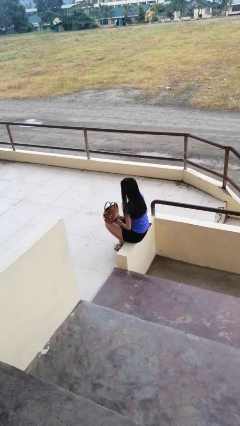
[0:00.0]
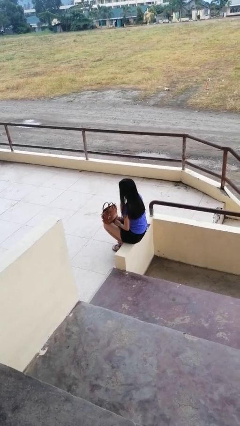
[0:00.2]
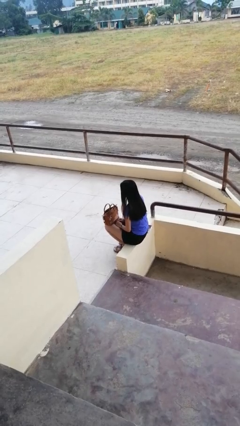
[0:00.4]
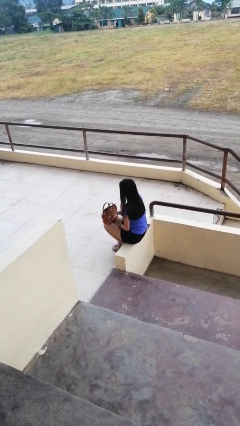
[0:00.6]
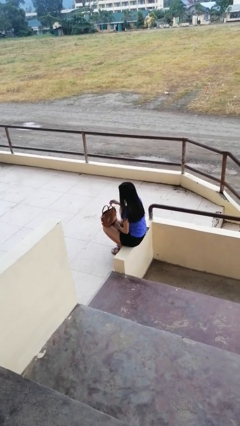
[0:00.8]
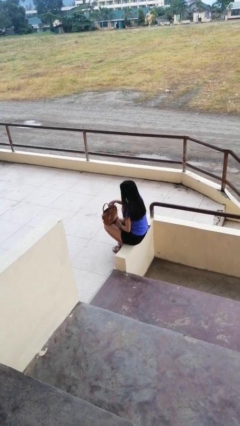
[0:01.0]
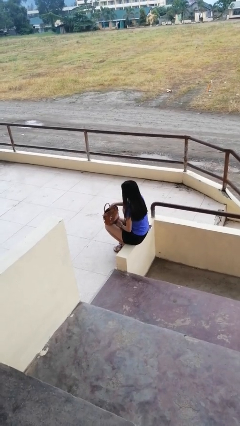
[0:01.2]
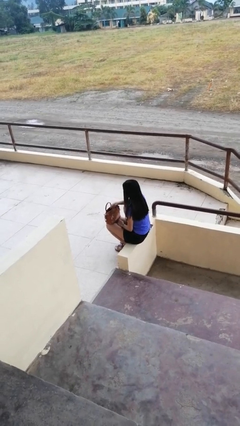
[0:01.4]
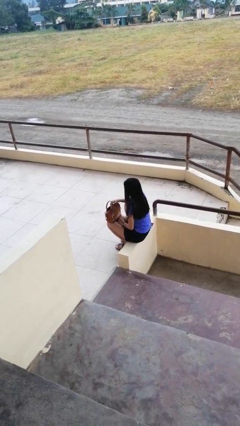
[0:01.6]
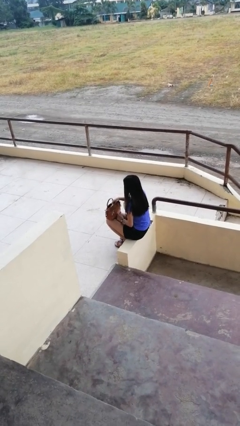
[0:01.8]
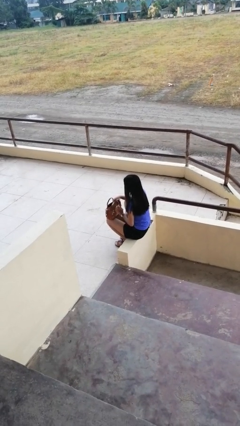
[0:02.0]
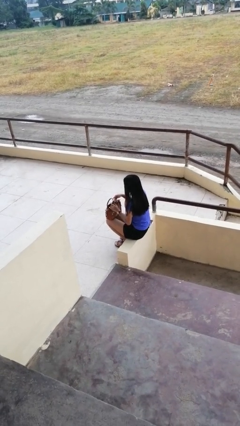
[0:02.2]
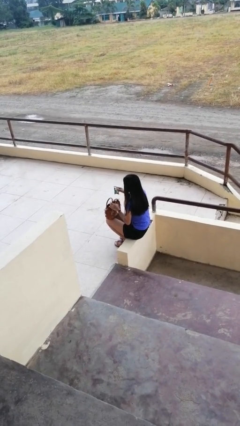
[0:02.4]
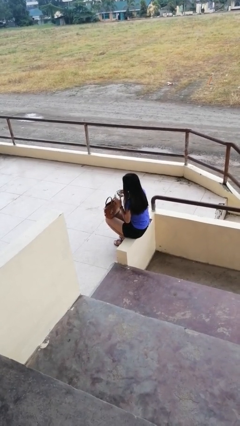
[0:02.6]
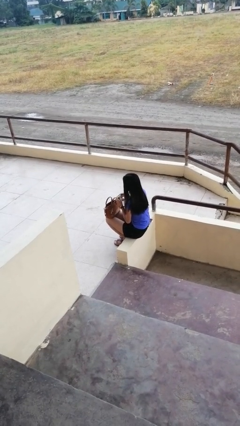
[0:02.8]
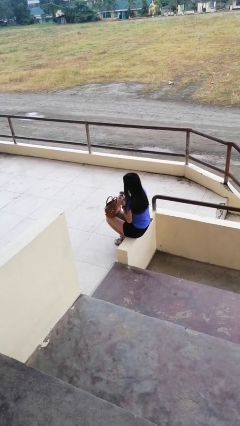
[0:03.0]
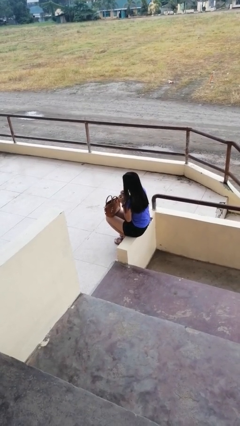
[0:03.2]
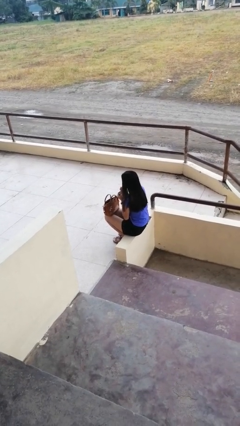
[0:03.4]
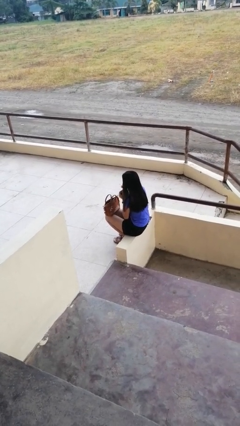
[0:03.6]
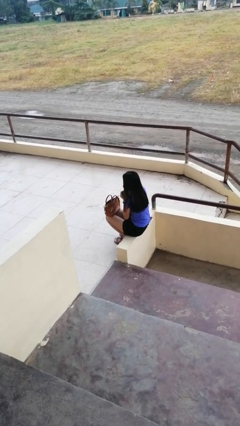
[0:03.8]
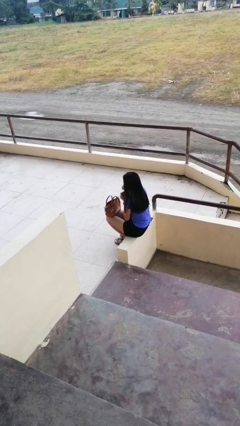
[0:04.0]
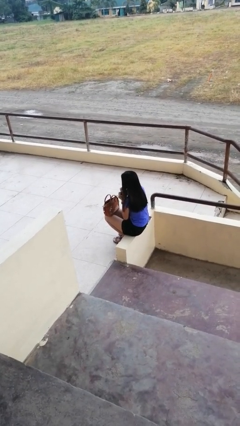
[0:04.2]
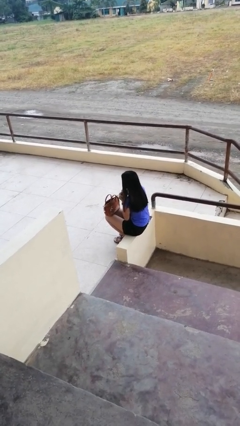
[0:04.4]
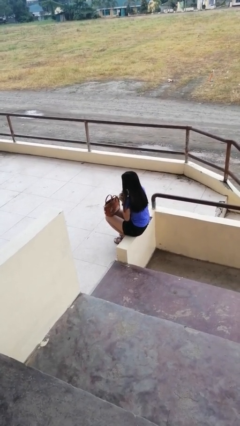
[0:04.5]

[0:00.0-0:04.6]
person eats snack from bag

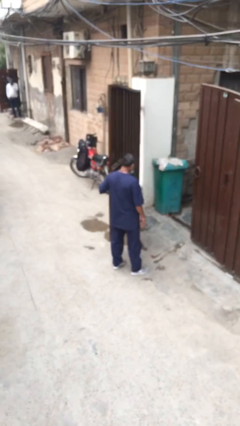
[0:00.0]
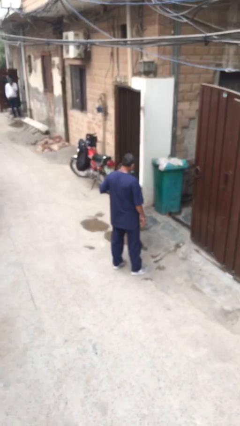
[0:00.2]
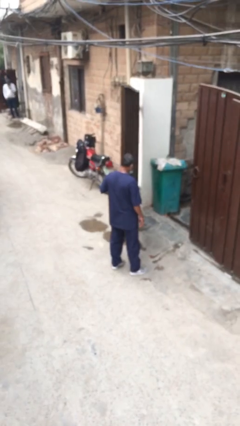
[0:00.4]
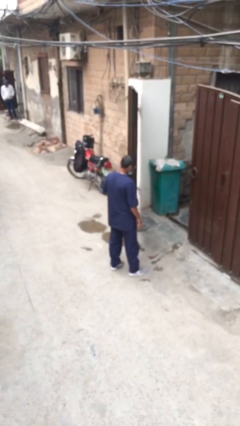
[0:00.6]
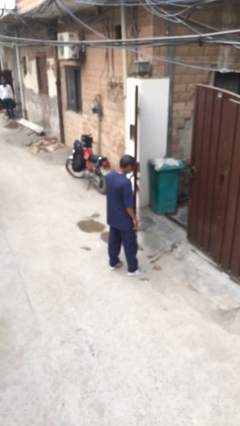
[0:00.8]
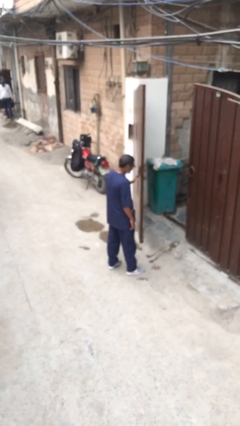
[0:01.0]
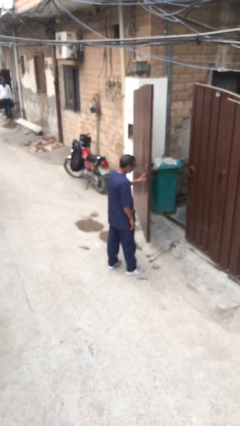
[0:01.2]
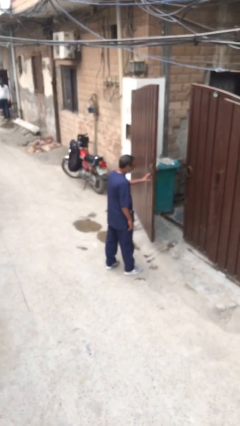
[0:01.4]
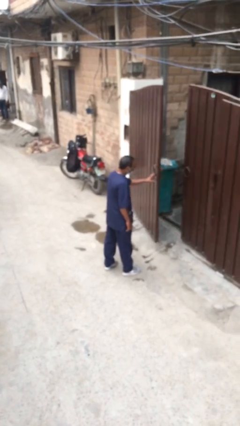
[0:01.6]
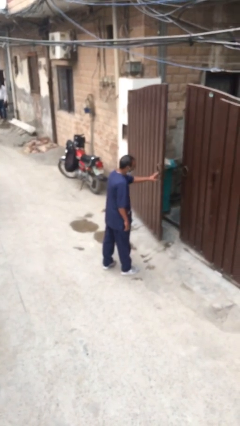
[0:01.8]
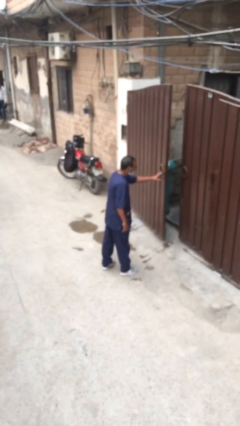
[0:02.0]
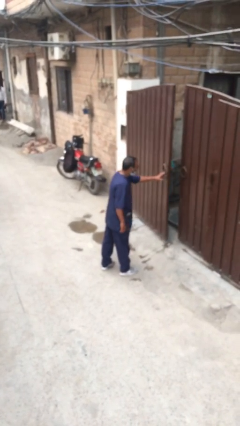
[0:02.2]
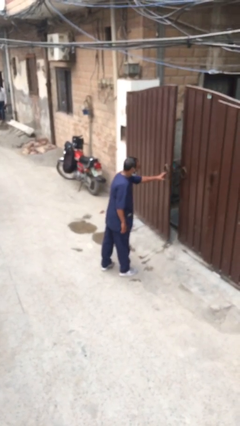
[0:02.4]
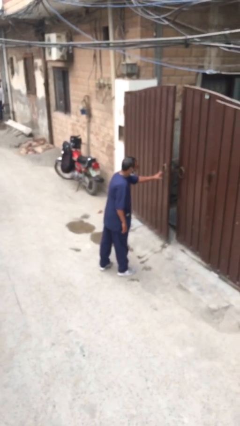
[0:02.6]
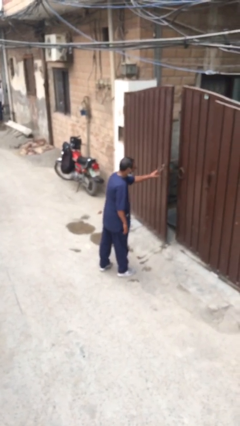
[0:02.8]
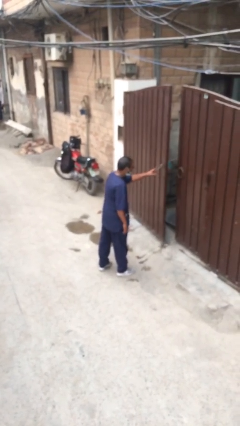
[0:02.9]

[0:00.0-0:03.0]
person closes facility door

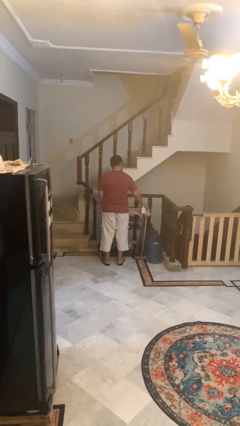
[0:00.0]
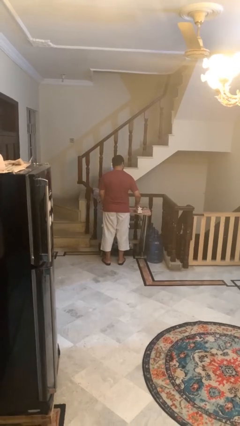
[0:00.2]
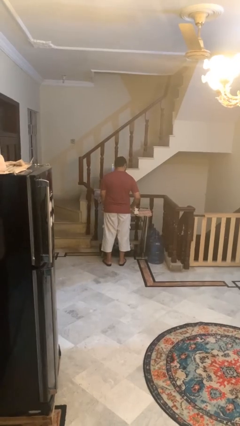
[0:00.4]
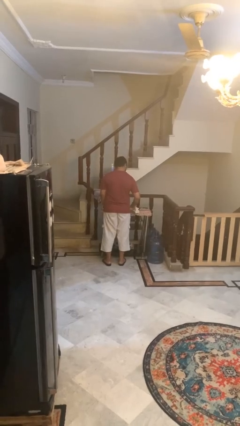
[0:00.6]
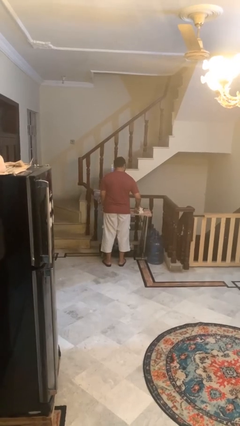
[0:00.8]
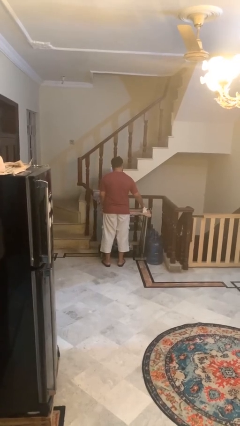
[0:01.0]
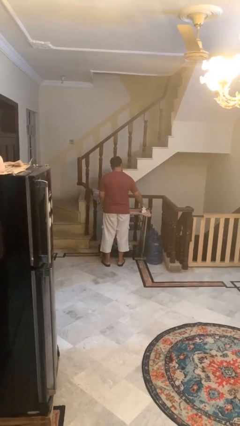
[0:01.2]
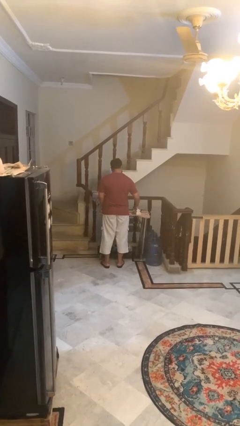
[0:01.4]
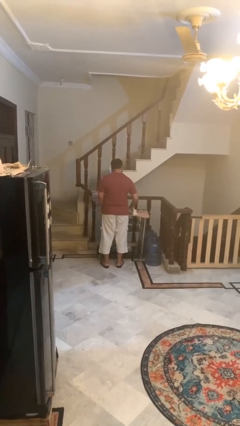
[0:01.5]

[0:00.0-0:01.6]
person irons clothes

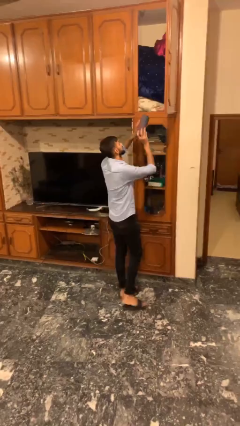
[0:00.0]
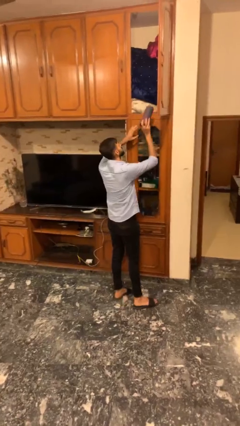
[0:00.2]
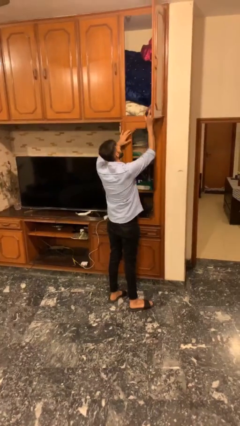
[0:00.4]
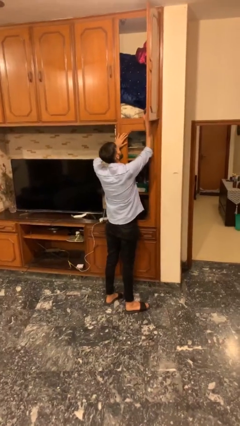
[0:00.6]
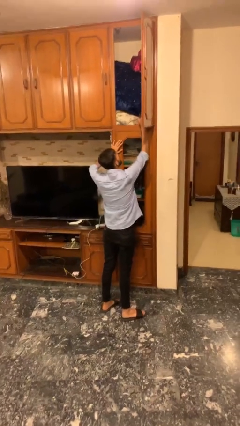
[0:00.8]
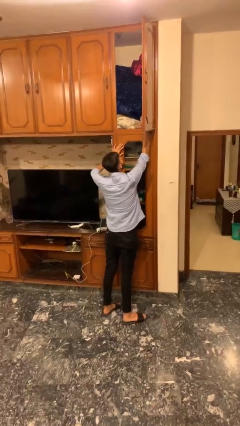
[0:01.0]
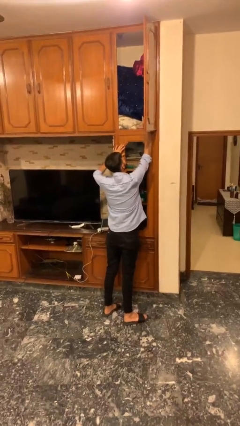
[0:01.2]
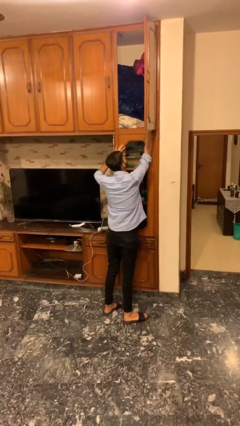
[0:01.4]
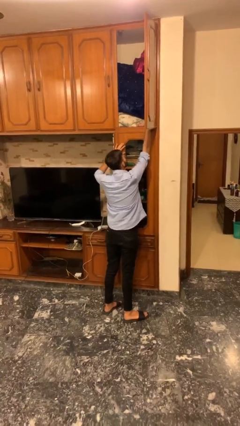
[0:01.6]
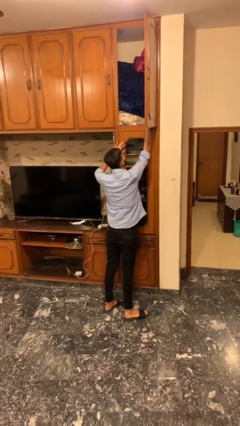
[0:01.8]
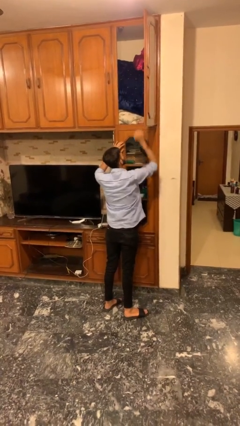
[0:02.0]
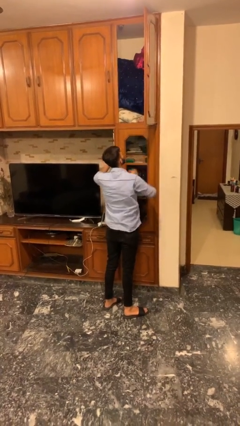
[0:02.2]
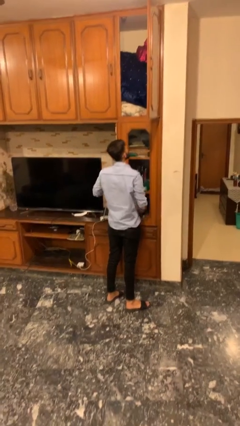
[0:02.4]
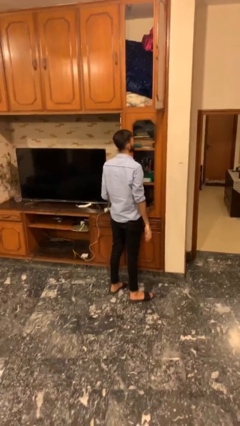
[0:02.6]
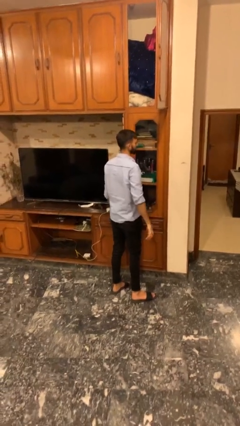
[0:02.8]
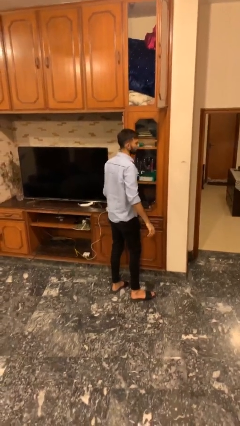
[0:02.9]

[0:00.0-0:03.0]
person puts down object on shelf

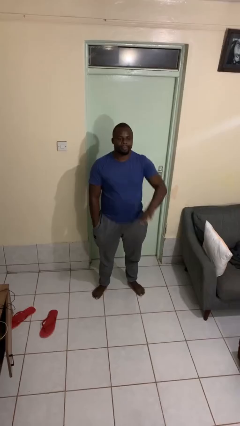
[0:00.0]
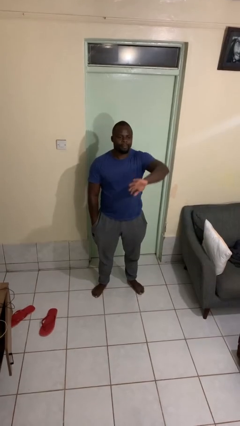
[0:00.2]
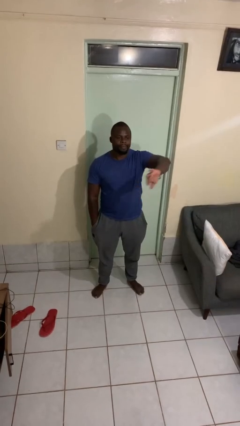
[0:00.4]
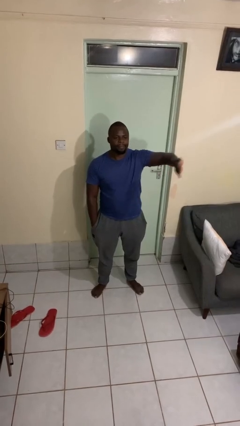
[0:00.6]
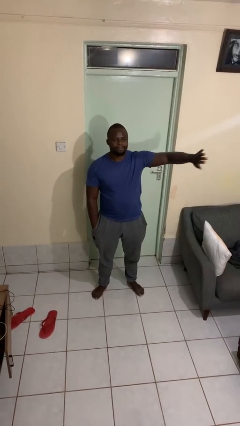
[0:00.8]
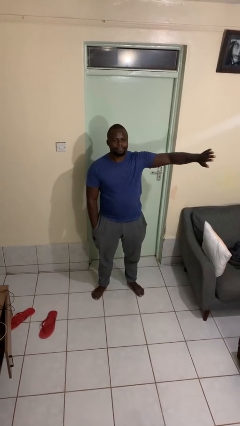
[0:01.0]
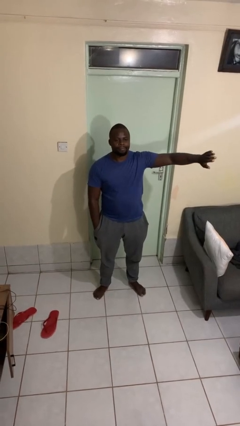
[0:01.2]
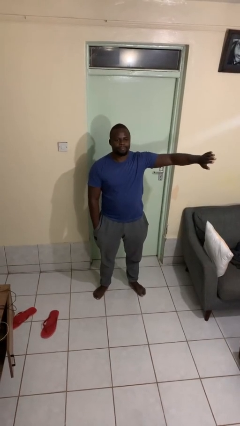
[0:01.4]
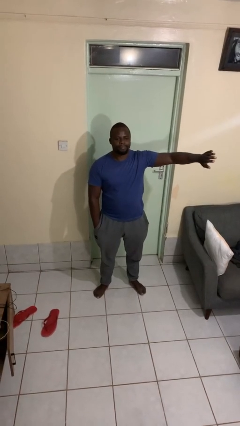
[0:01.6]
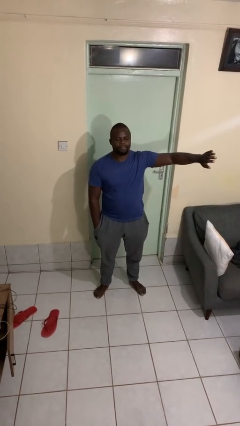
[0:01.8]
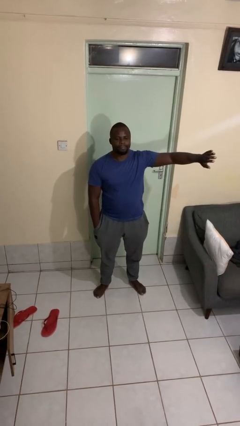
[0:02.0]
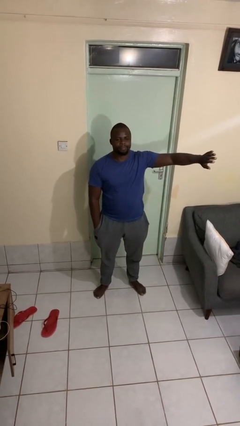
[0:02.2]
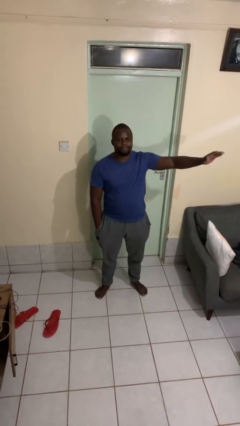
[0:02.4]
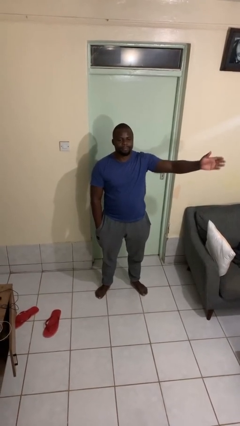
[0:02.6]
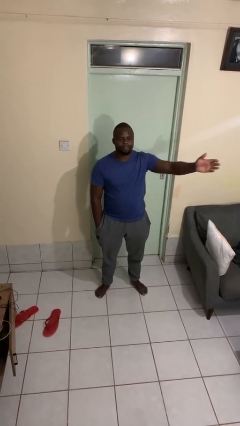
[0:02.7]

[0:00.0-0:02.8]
person gestures swipe left

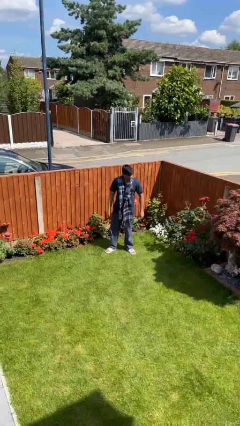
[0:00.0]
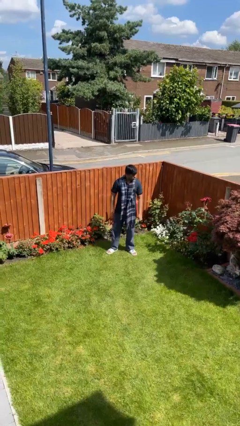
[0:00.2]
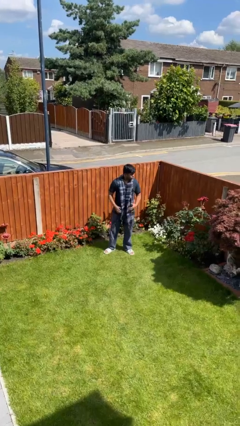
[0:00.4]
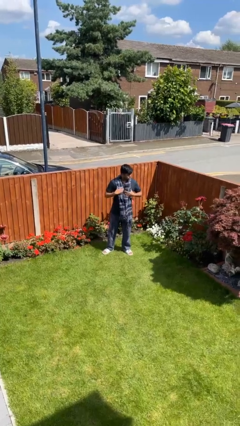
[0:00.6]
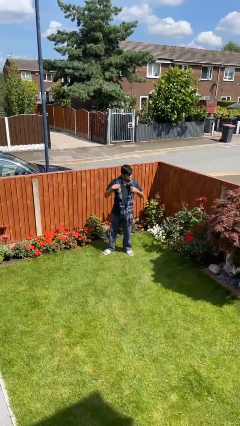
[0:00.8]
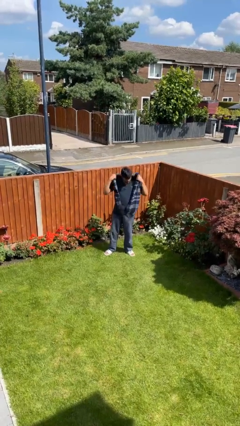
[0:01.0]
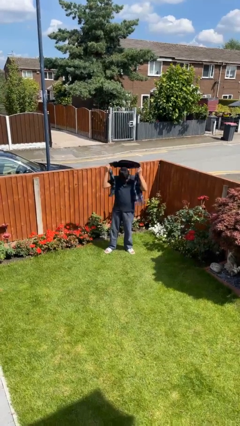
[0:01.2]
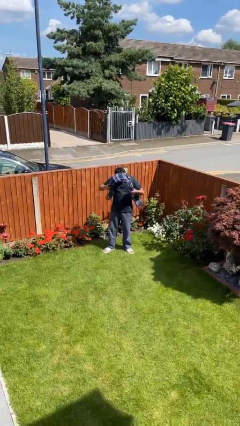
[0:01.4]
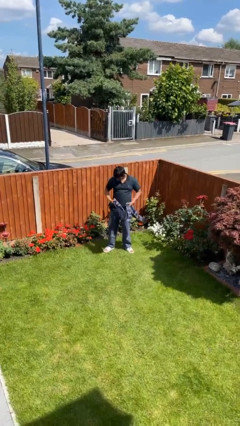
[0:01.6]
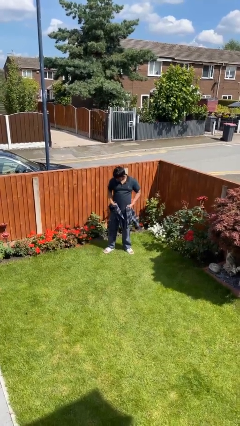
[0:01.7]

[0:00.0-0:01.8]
person takes off scarf

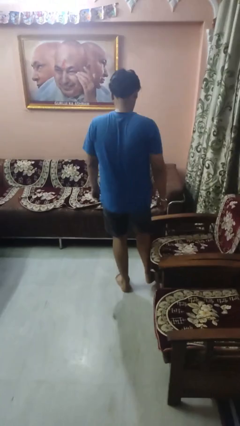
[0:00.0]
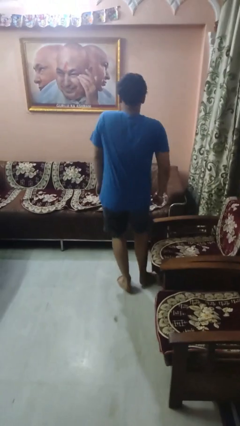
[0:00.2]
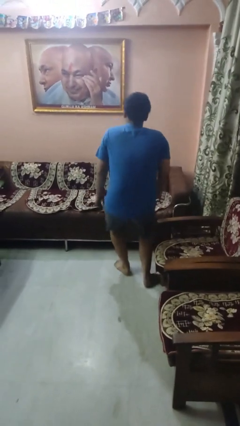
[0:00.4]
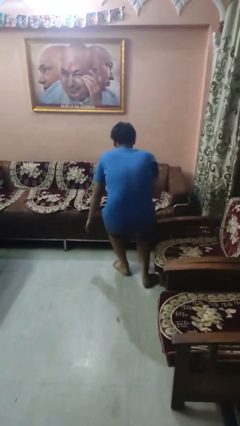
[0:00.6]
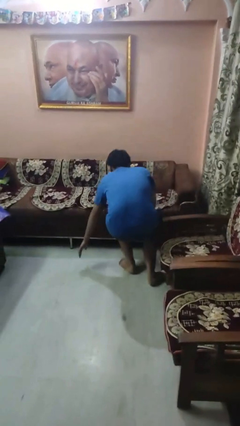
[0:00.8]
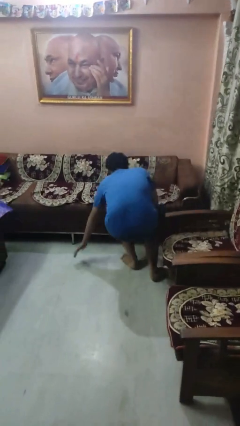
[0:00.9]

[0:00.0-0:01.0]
person trips on object on floor
